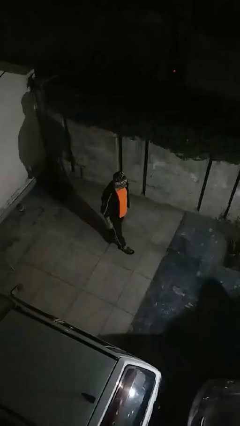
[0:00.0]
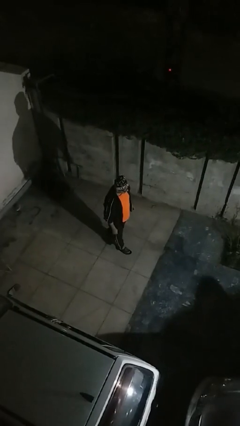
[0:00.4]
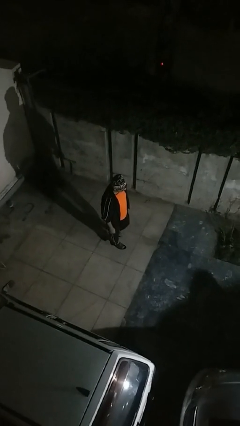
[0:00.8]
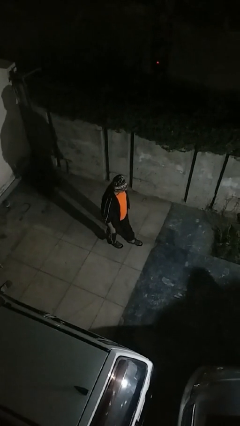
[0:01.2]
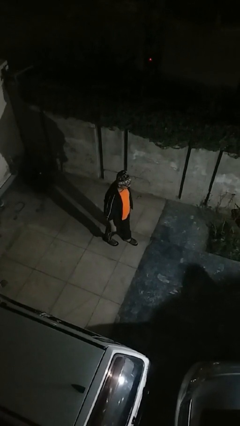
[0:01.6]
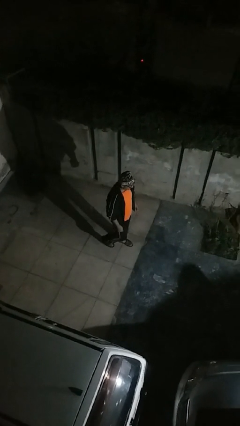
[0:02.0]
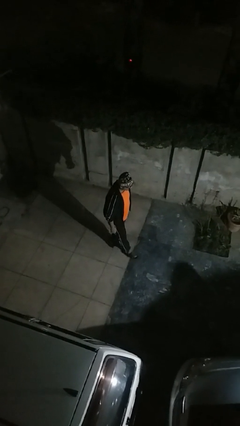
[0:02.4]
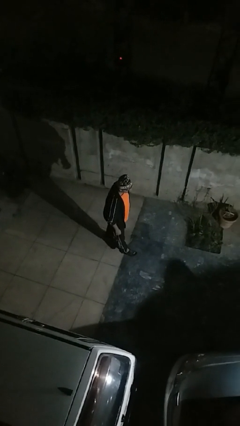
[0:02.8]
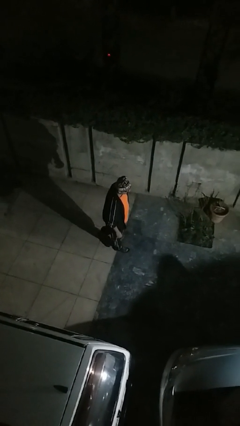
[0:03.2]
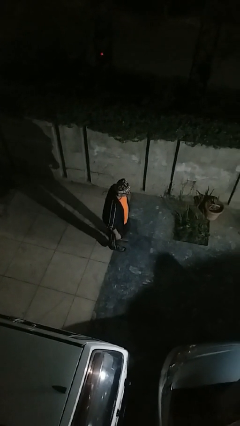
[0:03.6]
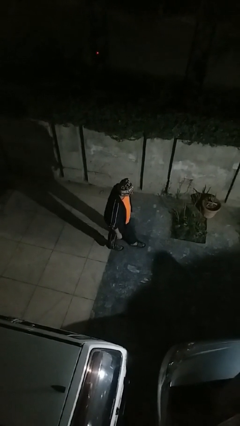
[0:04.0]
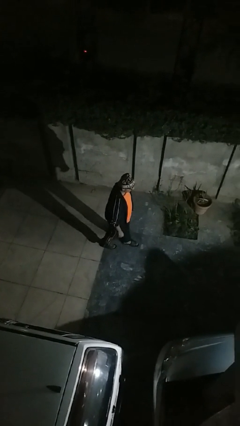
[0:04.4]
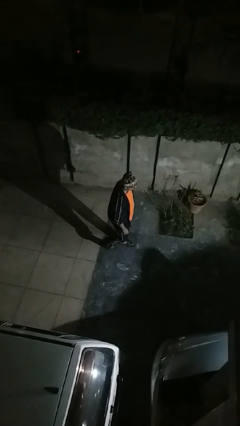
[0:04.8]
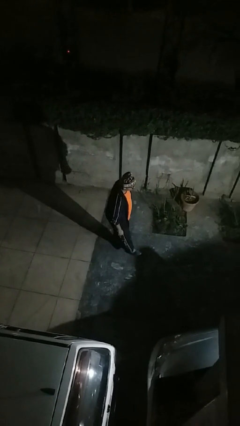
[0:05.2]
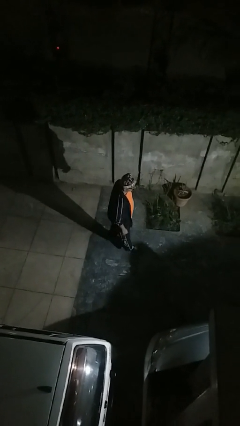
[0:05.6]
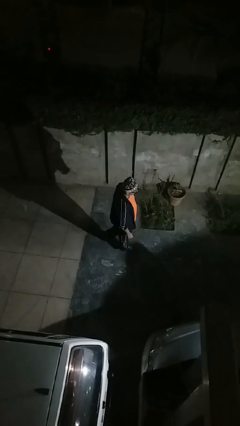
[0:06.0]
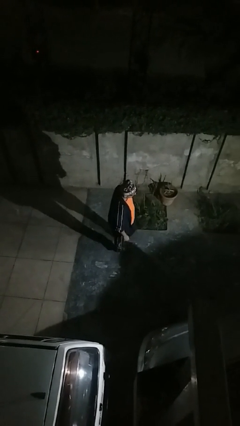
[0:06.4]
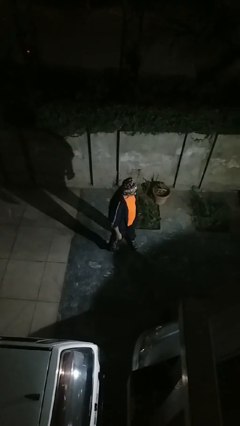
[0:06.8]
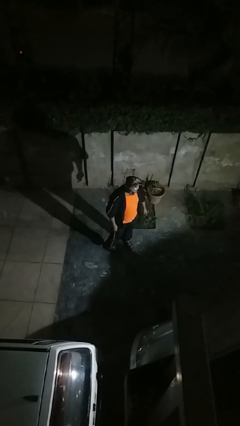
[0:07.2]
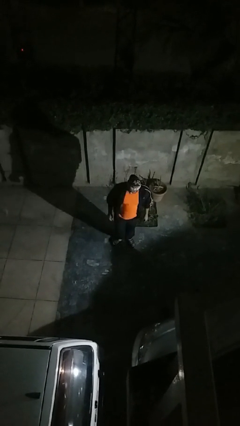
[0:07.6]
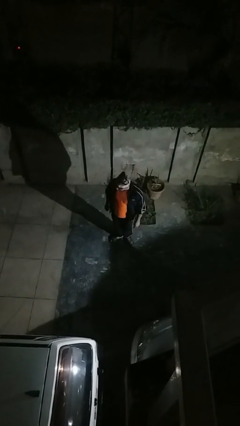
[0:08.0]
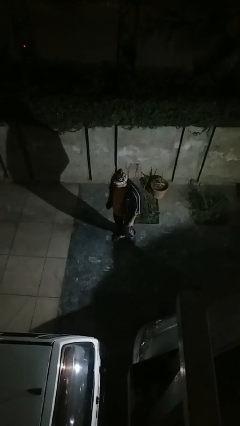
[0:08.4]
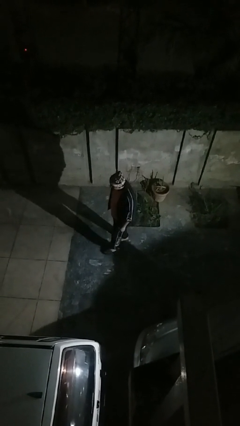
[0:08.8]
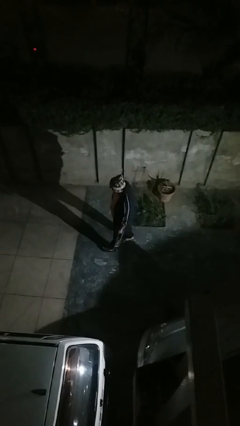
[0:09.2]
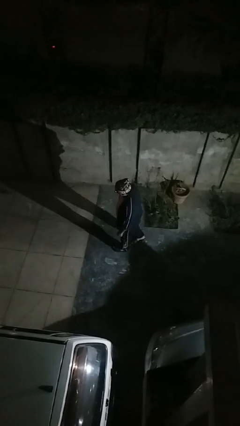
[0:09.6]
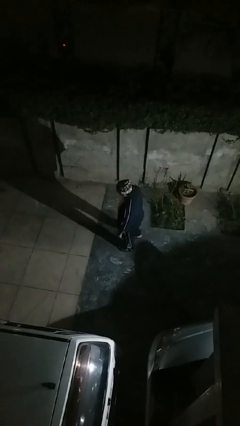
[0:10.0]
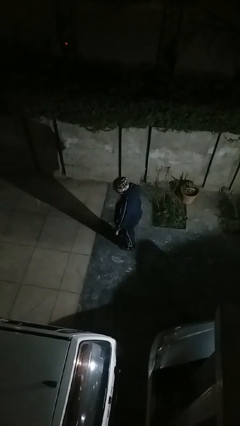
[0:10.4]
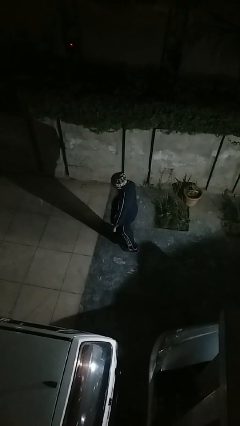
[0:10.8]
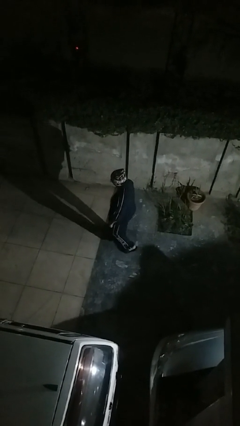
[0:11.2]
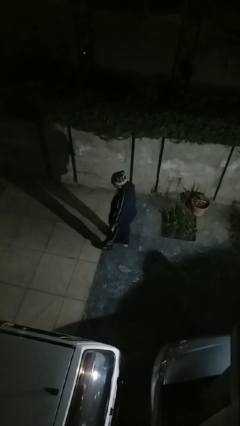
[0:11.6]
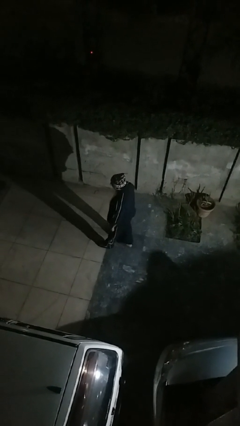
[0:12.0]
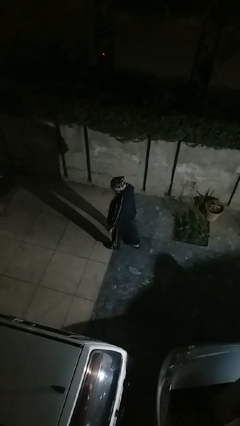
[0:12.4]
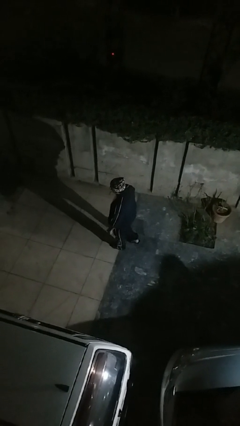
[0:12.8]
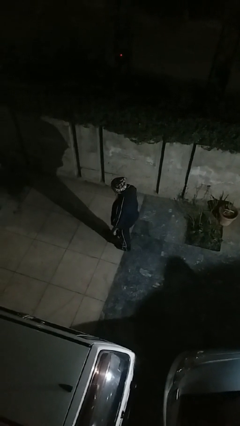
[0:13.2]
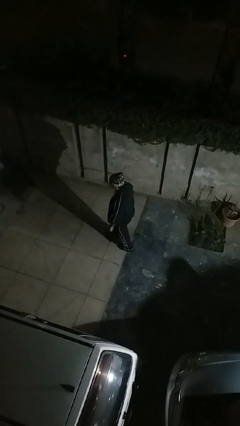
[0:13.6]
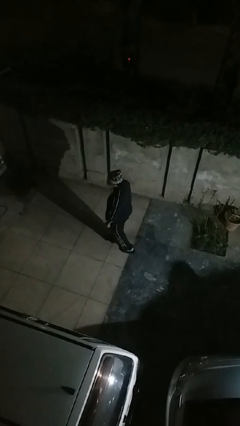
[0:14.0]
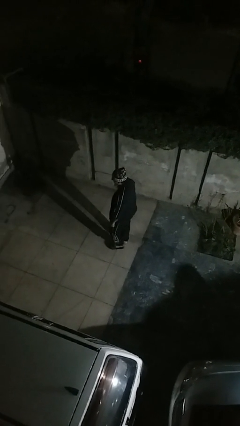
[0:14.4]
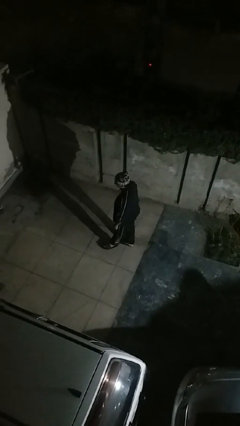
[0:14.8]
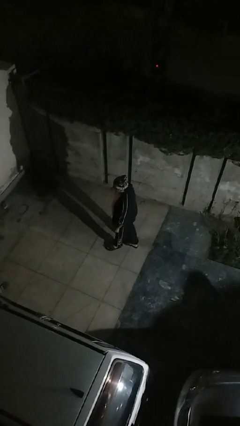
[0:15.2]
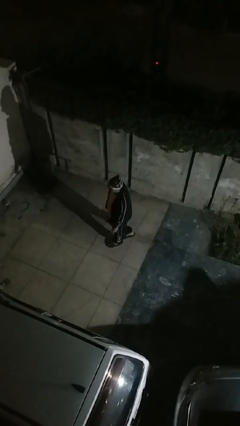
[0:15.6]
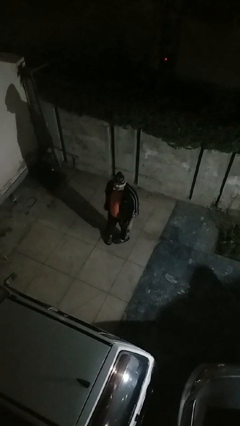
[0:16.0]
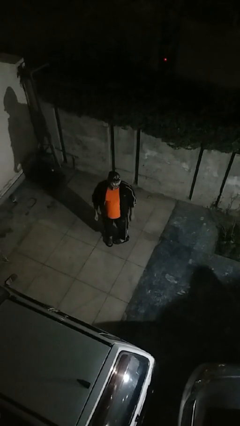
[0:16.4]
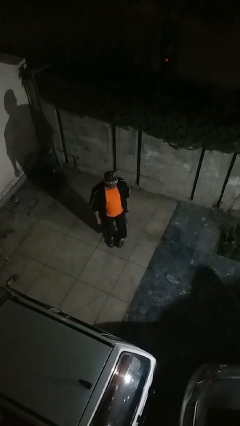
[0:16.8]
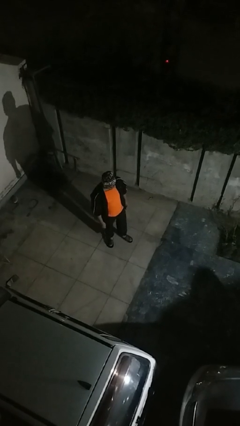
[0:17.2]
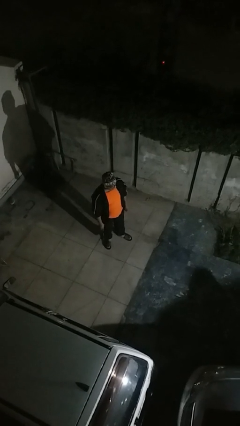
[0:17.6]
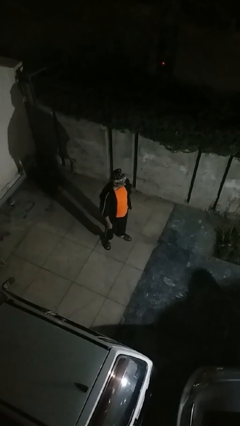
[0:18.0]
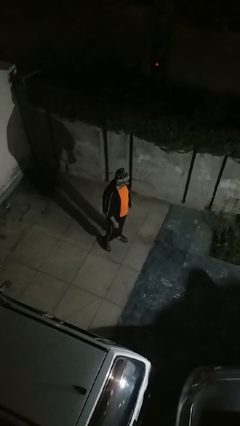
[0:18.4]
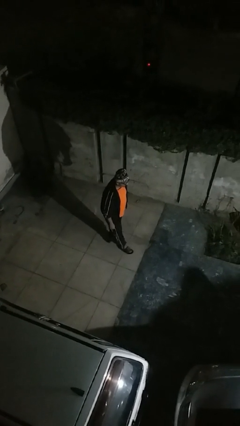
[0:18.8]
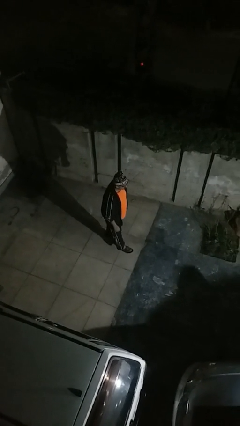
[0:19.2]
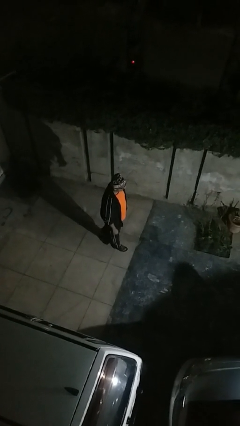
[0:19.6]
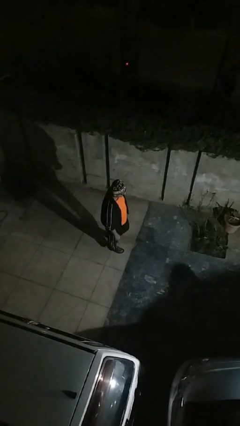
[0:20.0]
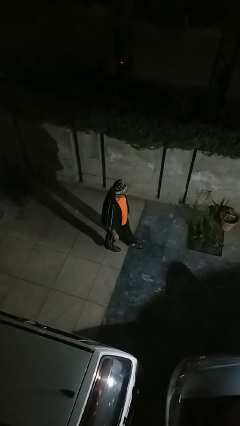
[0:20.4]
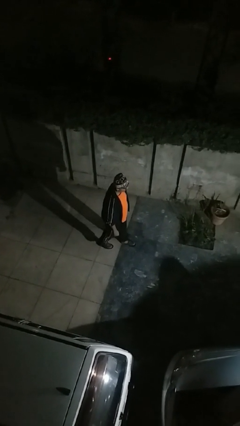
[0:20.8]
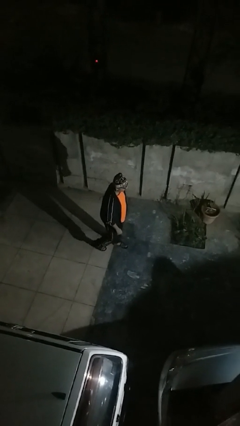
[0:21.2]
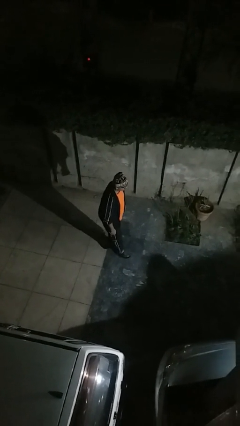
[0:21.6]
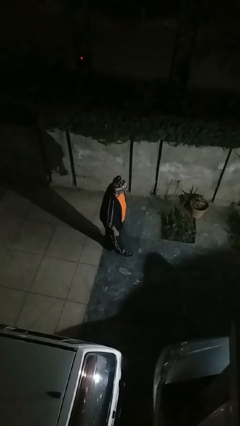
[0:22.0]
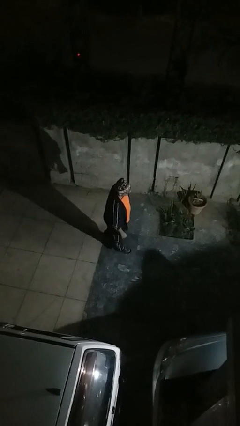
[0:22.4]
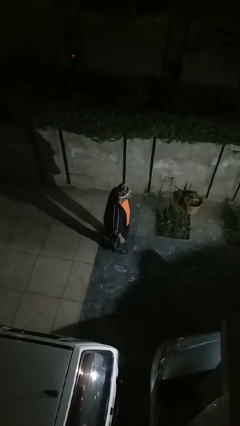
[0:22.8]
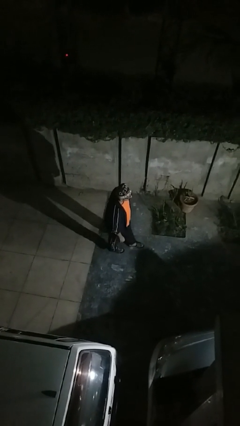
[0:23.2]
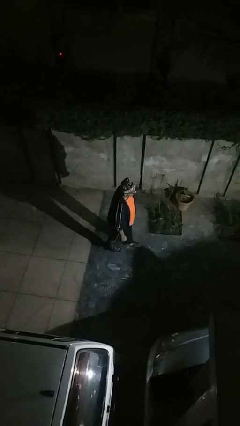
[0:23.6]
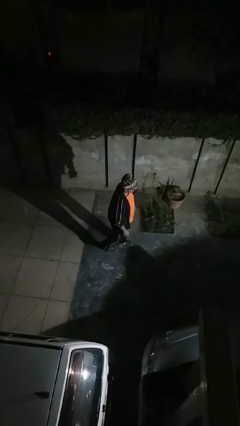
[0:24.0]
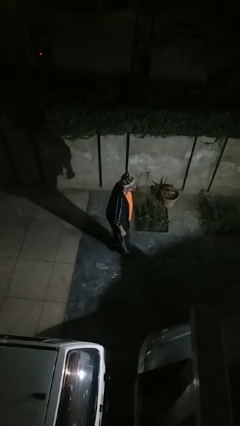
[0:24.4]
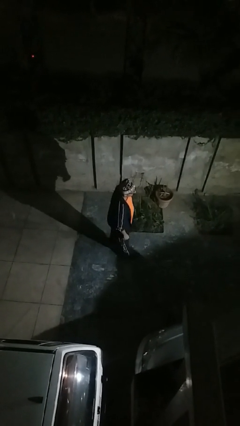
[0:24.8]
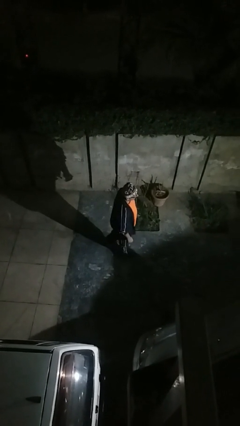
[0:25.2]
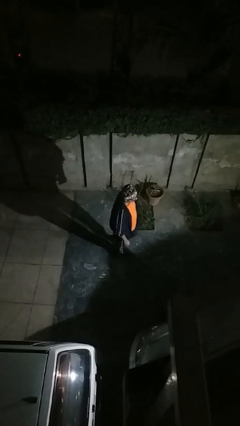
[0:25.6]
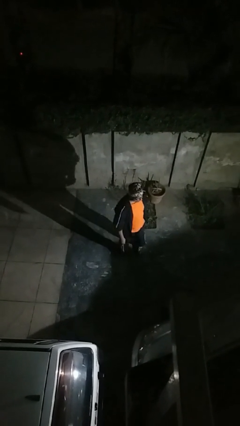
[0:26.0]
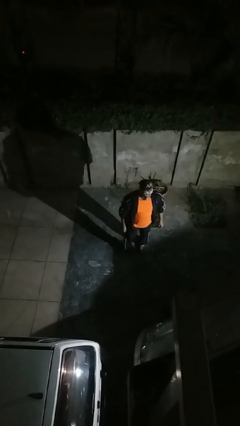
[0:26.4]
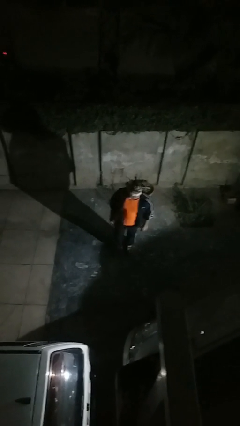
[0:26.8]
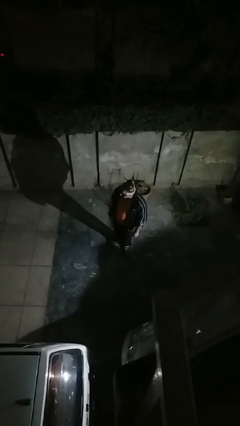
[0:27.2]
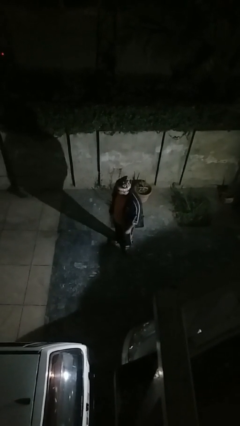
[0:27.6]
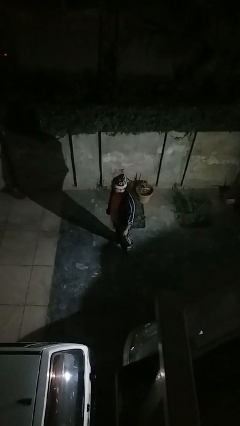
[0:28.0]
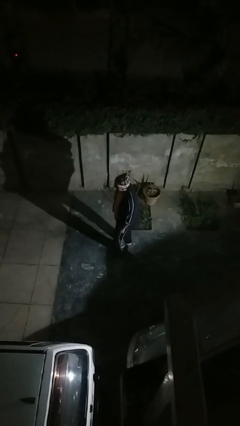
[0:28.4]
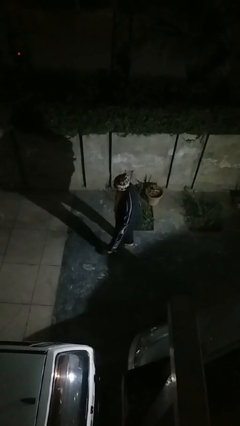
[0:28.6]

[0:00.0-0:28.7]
person walks

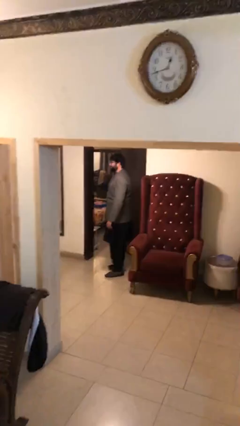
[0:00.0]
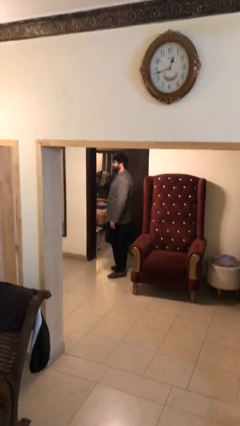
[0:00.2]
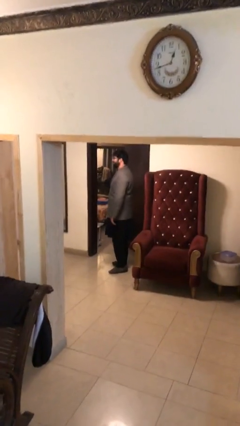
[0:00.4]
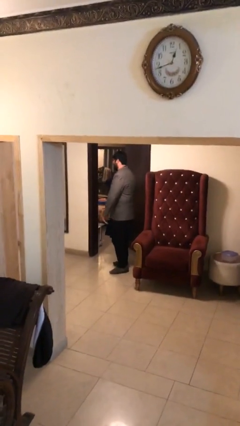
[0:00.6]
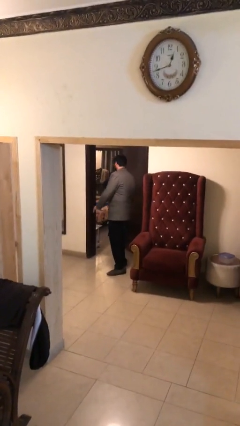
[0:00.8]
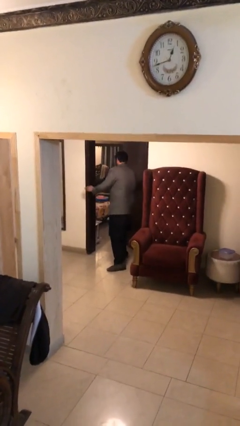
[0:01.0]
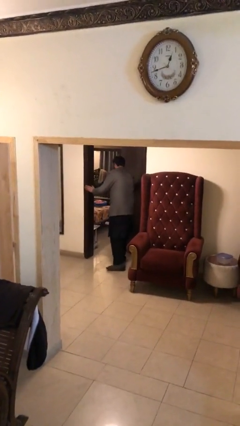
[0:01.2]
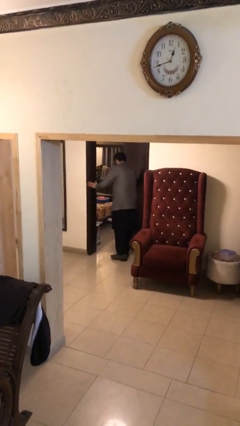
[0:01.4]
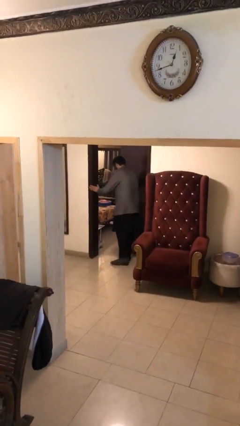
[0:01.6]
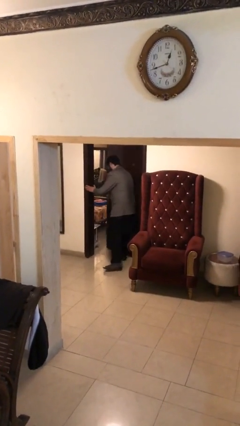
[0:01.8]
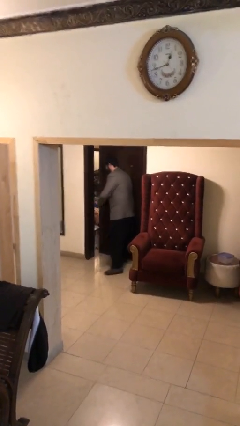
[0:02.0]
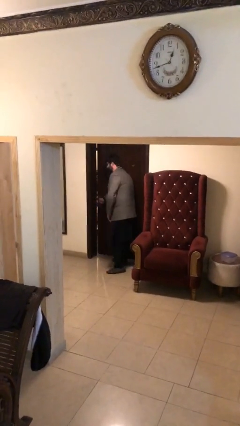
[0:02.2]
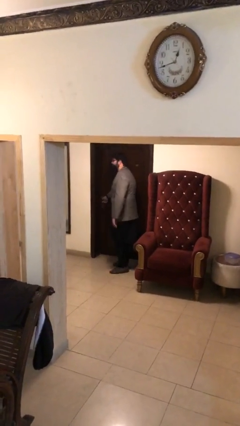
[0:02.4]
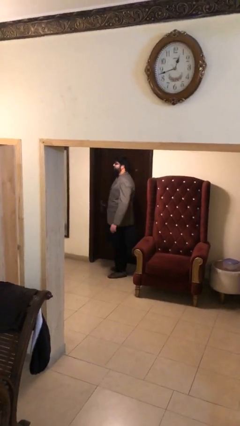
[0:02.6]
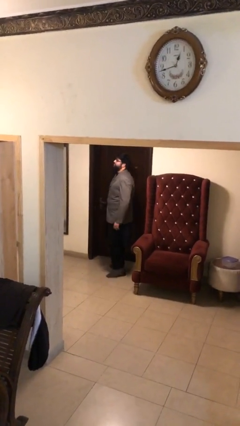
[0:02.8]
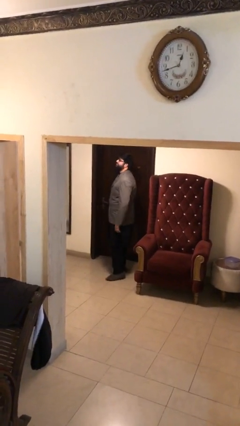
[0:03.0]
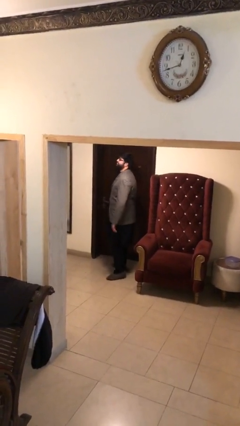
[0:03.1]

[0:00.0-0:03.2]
person closes facility door

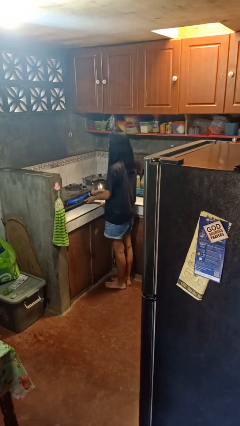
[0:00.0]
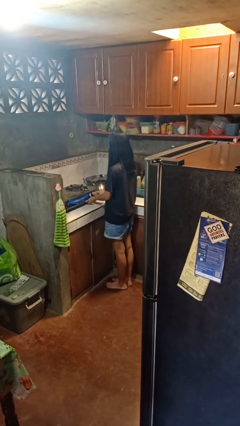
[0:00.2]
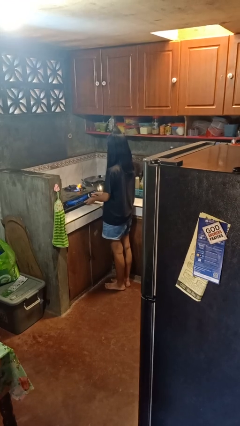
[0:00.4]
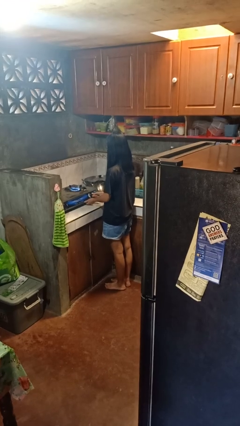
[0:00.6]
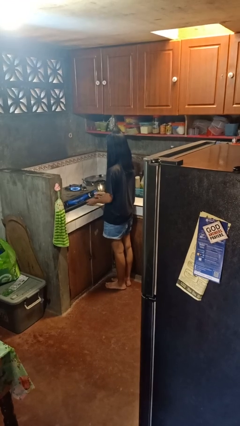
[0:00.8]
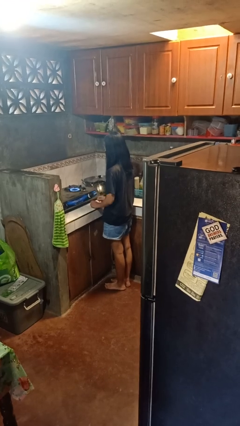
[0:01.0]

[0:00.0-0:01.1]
person turns on stovetop
